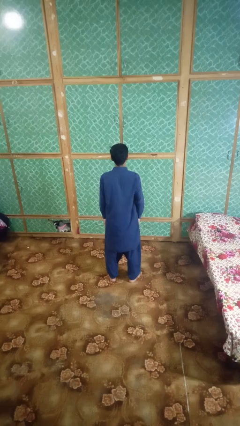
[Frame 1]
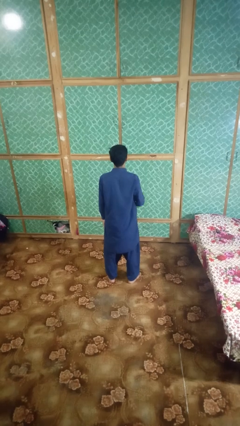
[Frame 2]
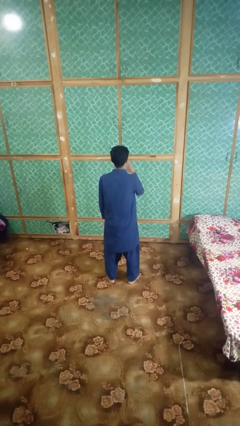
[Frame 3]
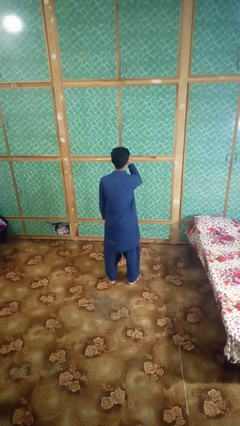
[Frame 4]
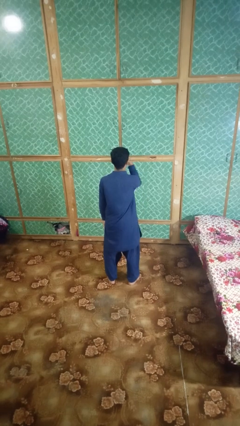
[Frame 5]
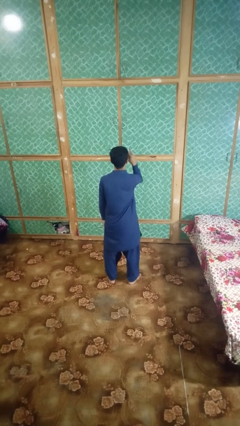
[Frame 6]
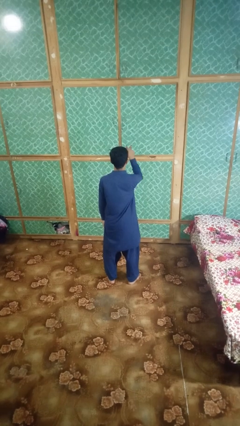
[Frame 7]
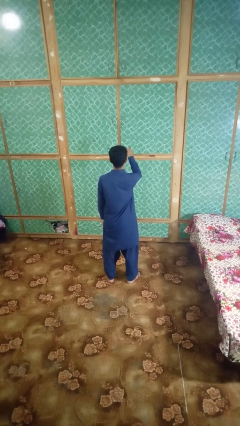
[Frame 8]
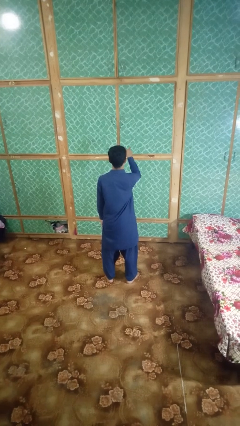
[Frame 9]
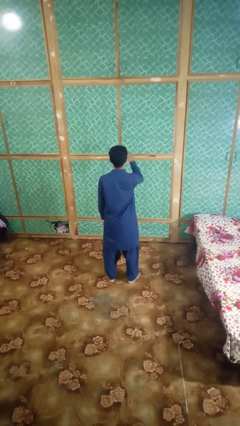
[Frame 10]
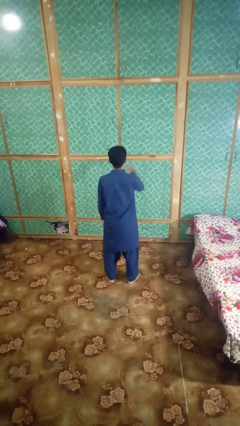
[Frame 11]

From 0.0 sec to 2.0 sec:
person gestures watch closely

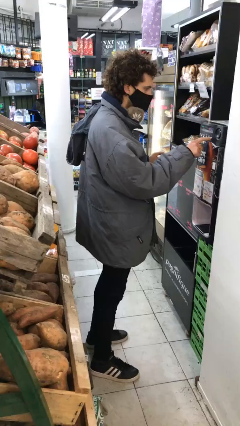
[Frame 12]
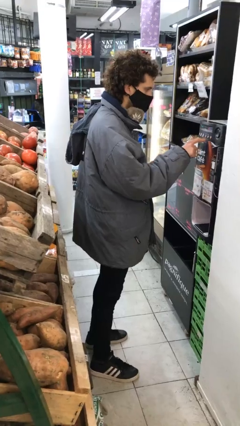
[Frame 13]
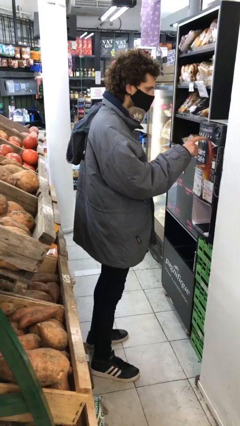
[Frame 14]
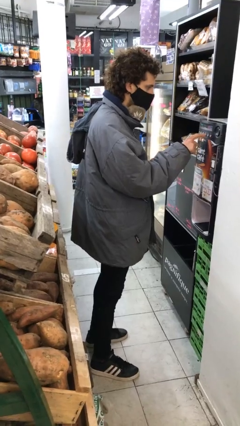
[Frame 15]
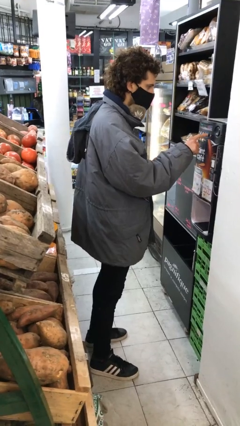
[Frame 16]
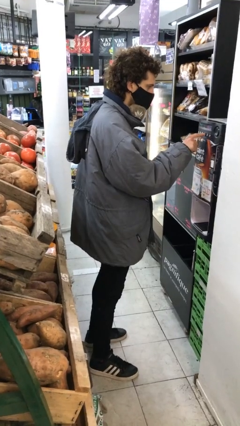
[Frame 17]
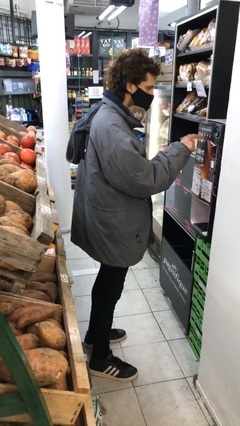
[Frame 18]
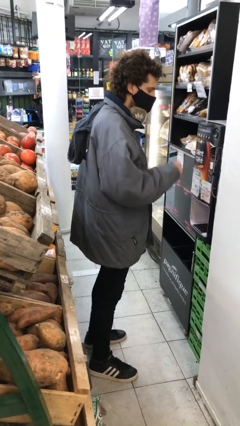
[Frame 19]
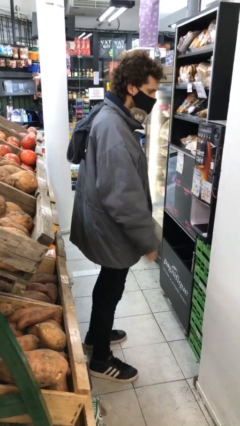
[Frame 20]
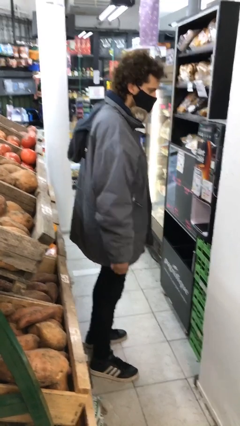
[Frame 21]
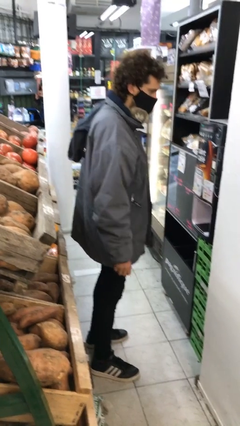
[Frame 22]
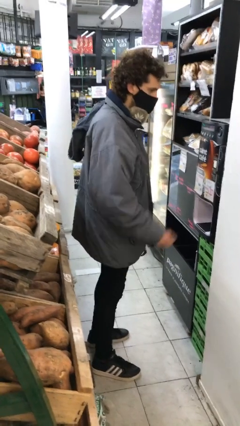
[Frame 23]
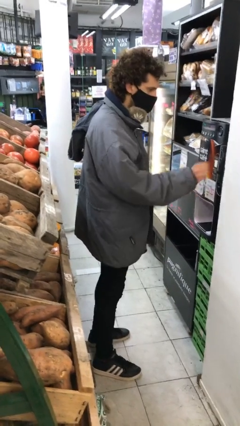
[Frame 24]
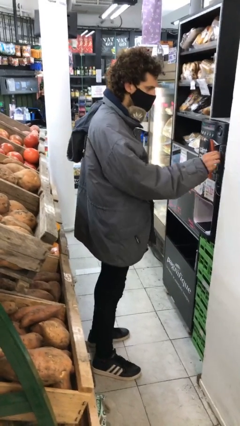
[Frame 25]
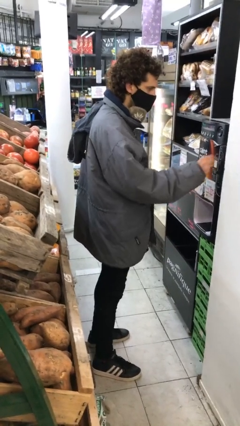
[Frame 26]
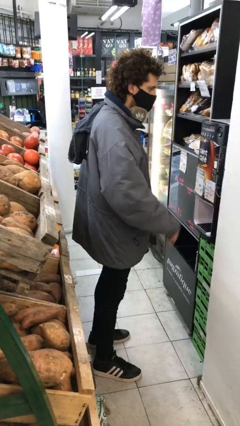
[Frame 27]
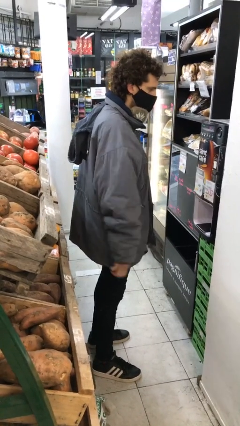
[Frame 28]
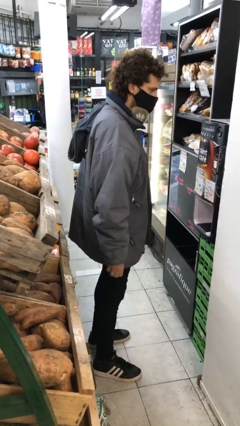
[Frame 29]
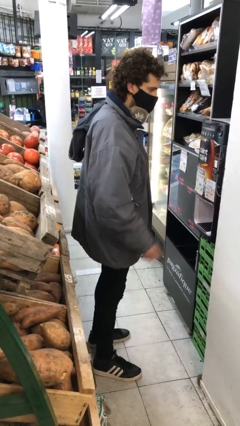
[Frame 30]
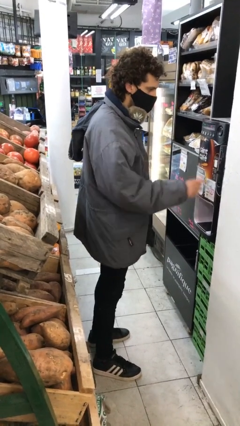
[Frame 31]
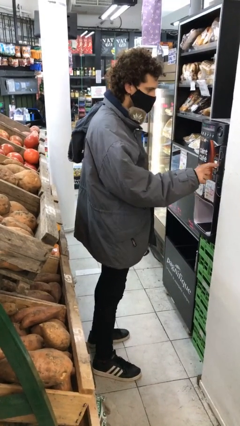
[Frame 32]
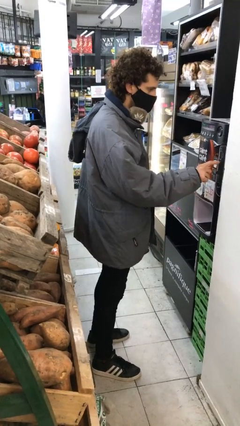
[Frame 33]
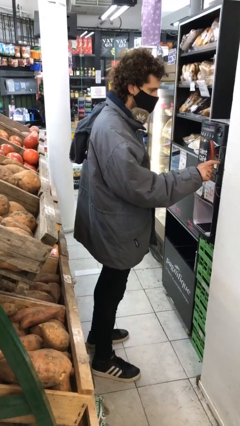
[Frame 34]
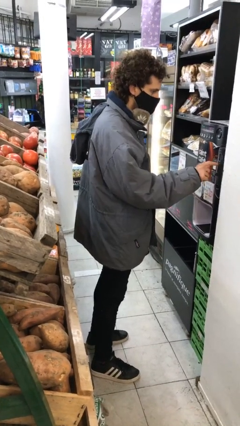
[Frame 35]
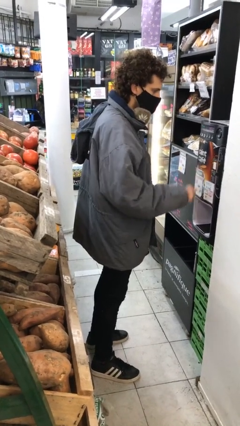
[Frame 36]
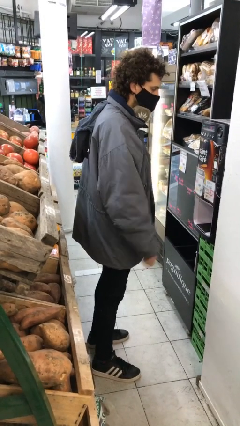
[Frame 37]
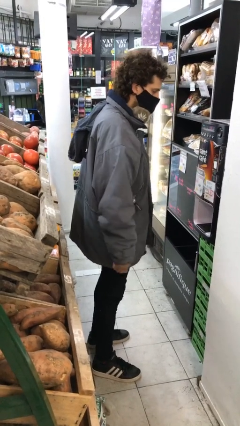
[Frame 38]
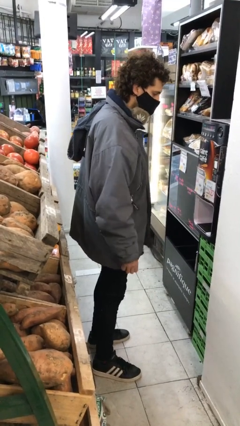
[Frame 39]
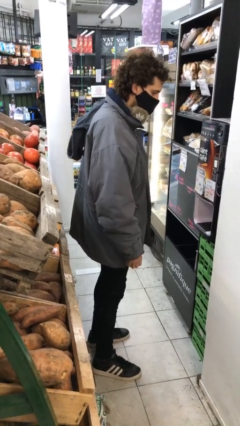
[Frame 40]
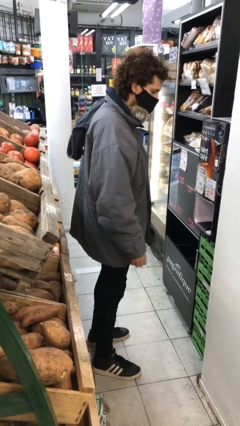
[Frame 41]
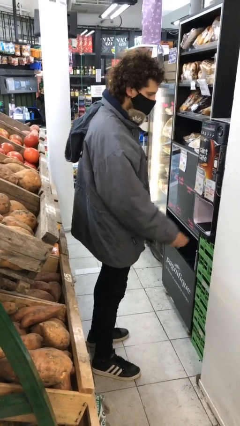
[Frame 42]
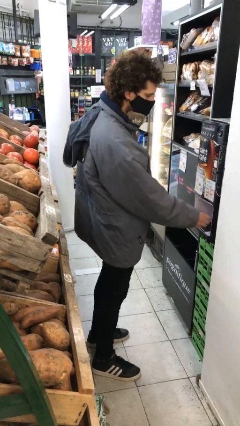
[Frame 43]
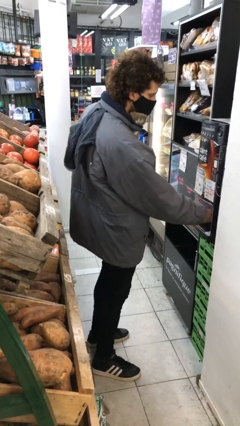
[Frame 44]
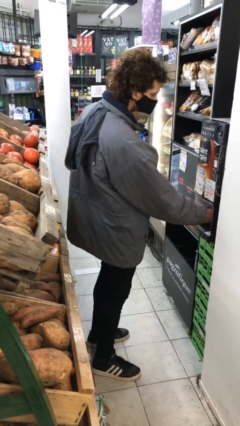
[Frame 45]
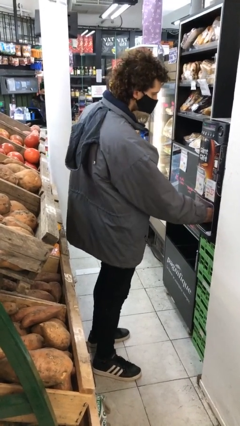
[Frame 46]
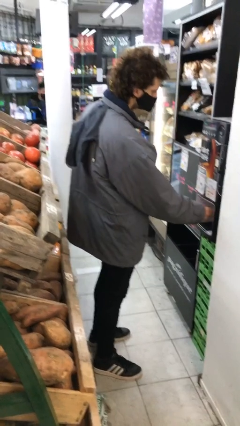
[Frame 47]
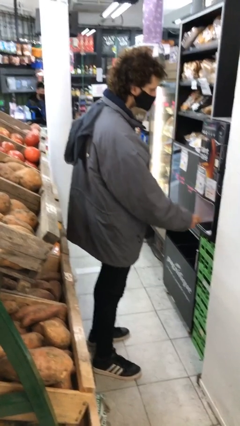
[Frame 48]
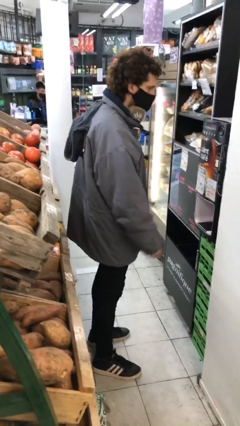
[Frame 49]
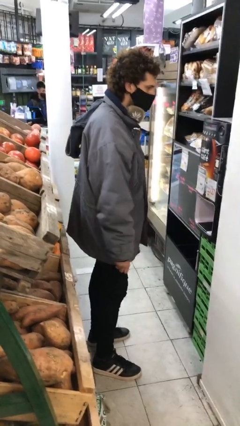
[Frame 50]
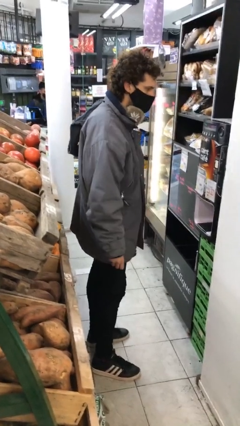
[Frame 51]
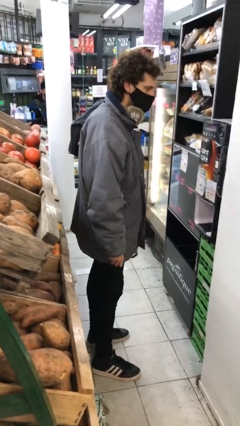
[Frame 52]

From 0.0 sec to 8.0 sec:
person purchases from machine

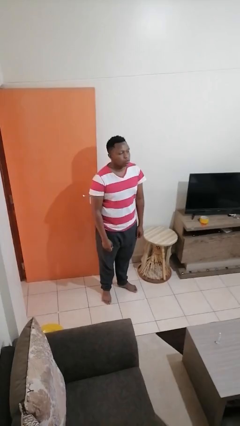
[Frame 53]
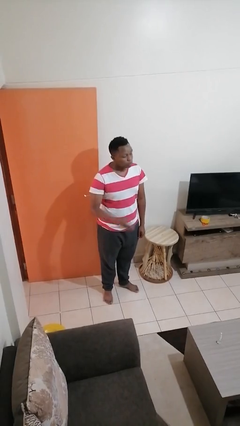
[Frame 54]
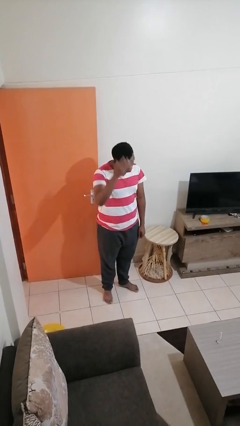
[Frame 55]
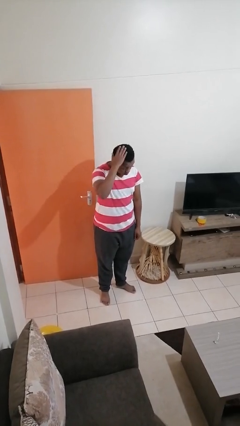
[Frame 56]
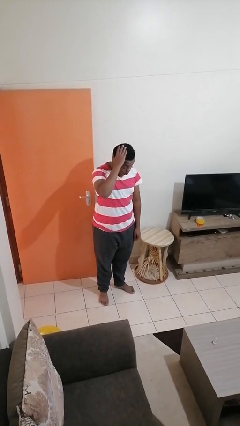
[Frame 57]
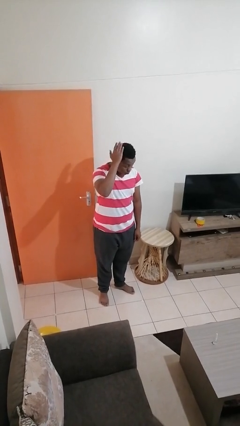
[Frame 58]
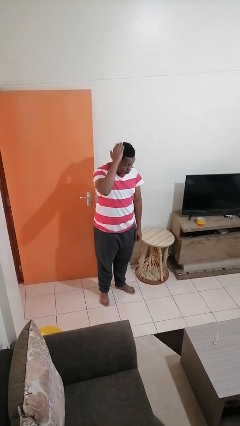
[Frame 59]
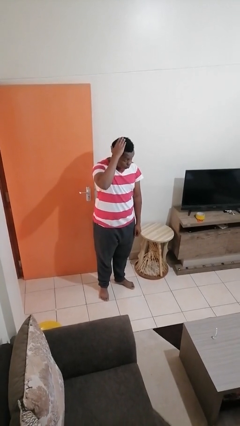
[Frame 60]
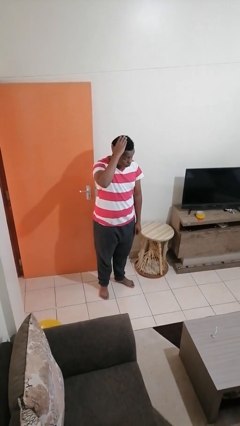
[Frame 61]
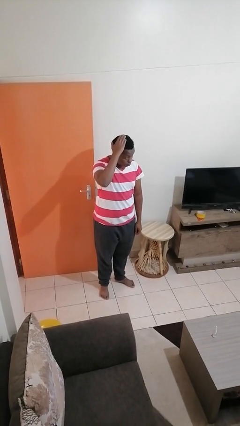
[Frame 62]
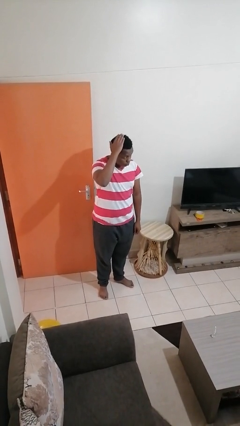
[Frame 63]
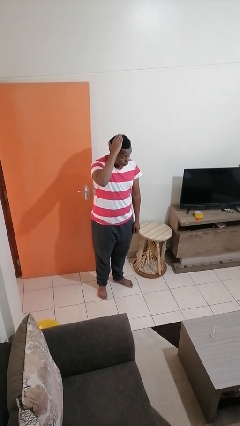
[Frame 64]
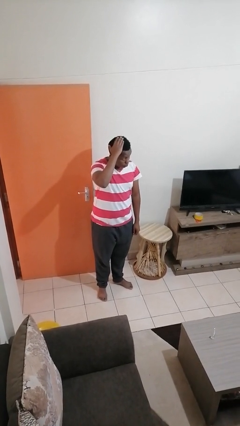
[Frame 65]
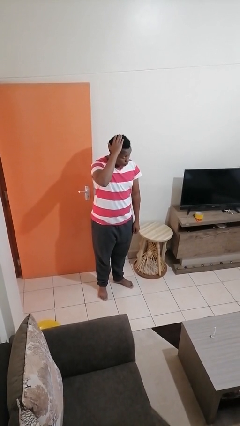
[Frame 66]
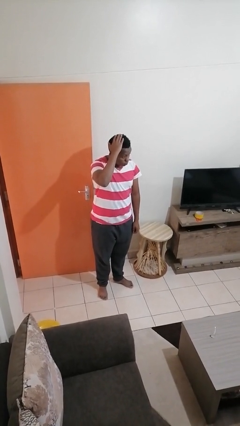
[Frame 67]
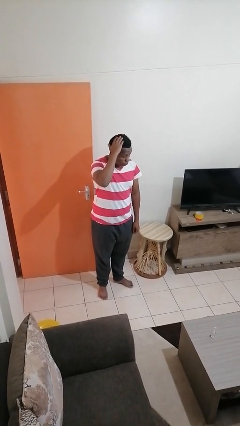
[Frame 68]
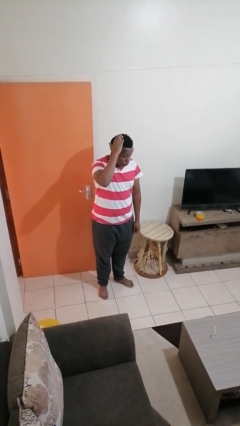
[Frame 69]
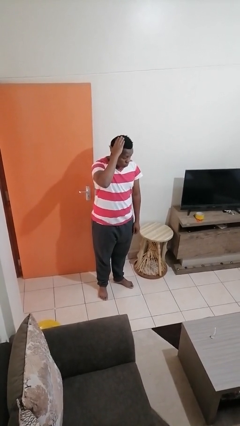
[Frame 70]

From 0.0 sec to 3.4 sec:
person pats head

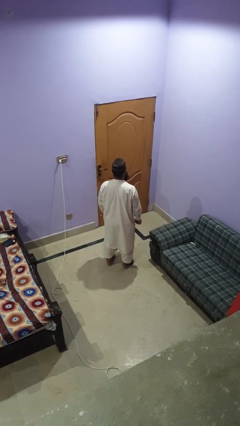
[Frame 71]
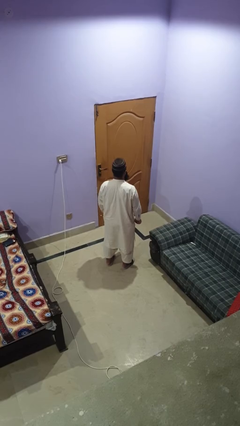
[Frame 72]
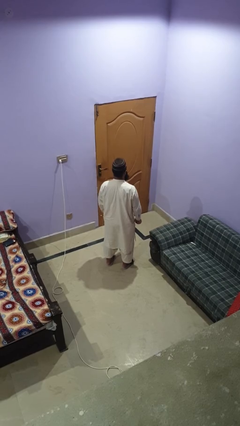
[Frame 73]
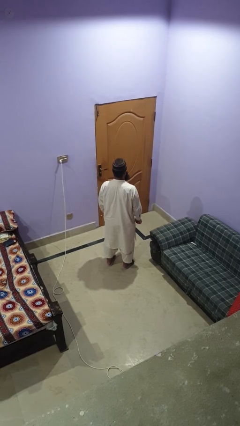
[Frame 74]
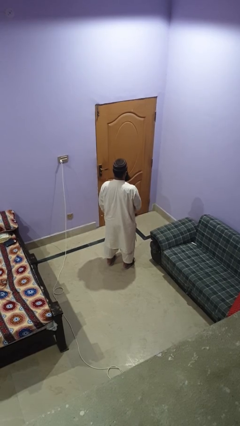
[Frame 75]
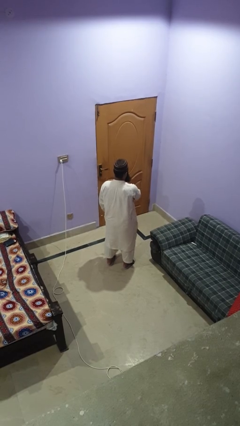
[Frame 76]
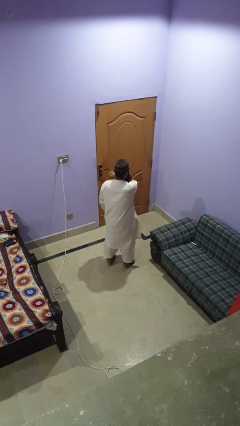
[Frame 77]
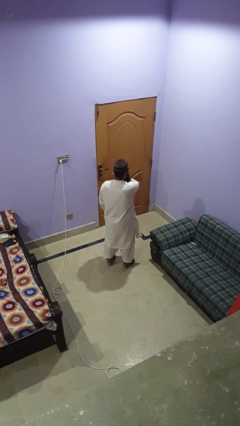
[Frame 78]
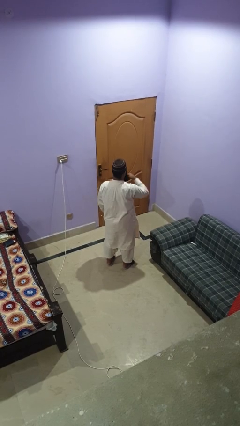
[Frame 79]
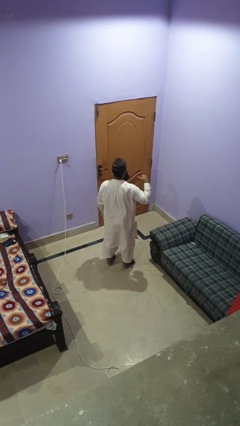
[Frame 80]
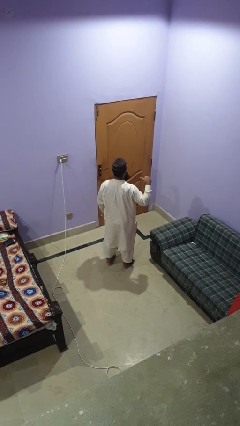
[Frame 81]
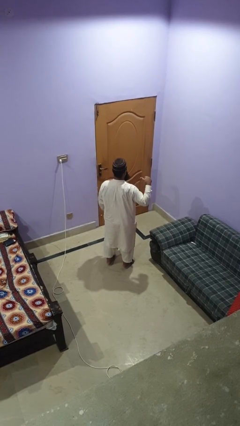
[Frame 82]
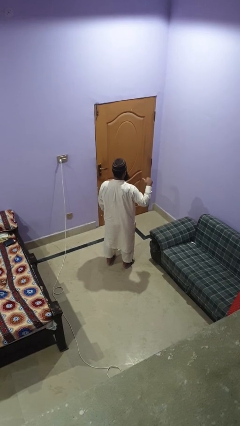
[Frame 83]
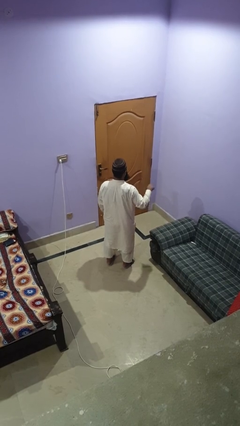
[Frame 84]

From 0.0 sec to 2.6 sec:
person gestures cut

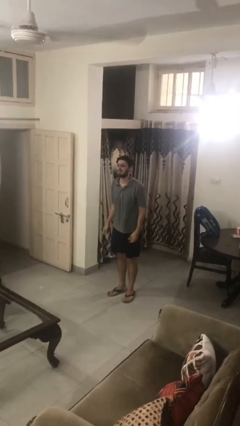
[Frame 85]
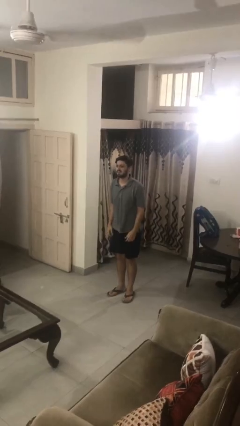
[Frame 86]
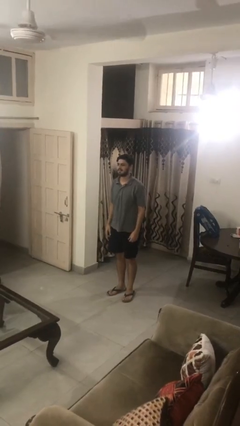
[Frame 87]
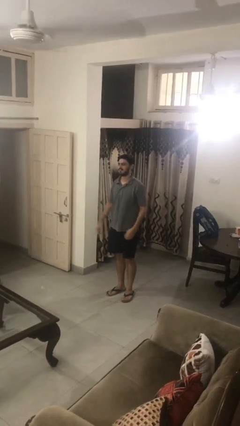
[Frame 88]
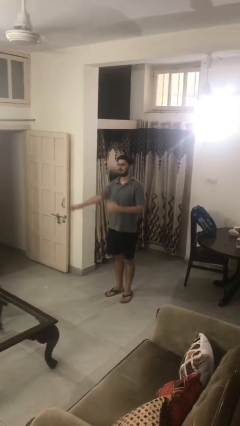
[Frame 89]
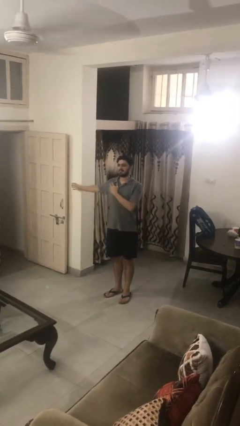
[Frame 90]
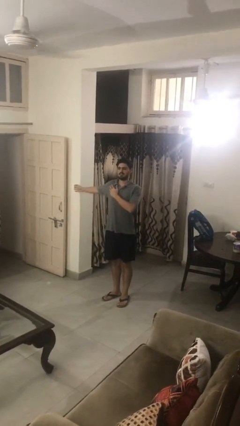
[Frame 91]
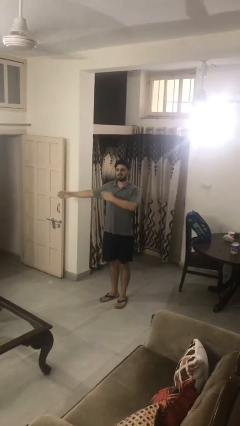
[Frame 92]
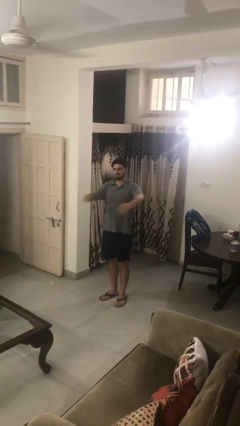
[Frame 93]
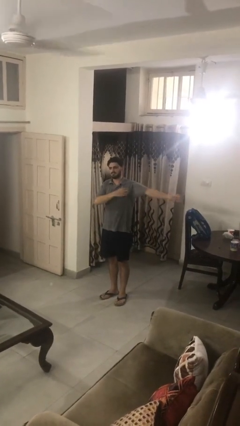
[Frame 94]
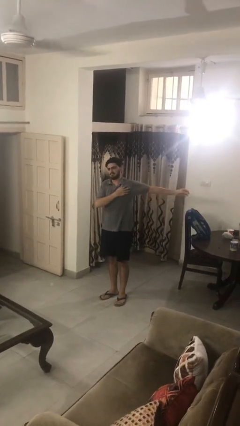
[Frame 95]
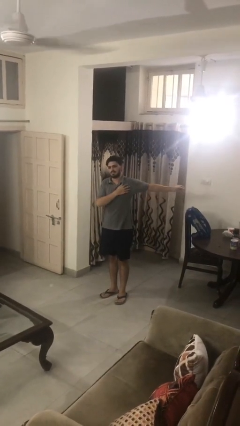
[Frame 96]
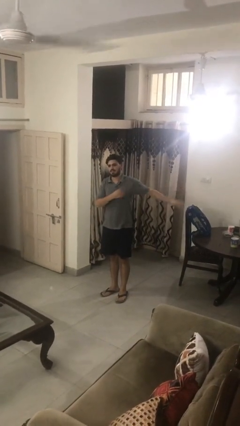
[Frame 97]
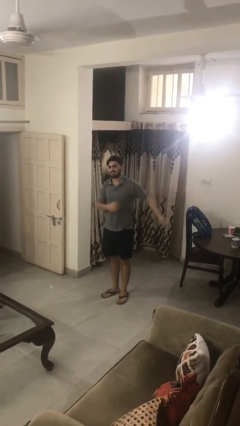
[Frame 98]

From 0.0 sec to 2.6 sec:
person stretches arms to side
